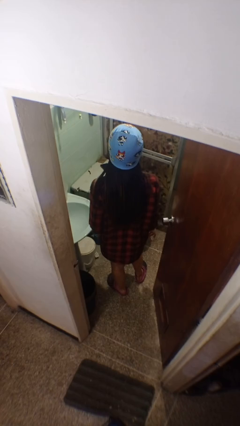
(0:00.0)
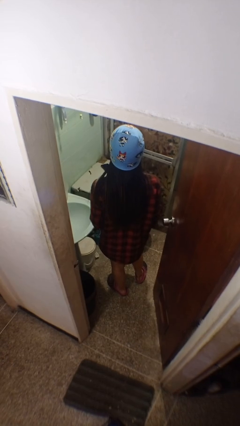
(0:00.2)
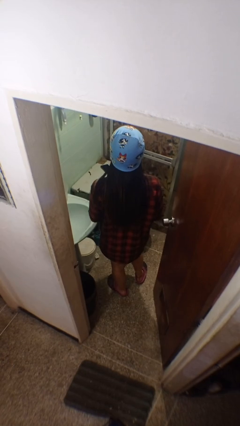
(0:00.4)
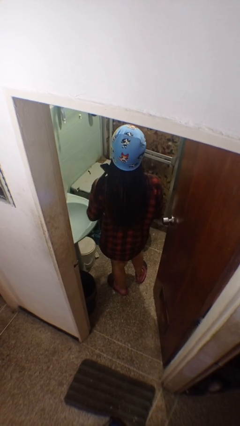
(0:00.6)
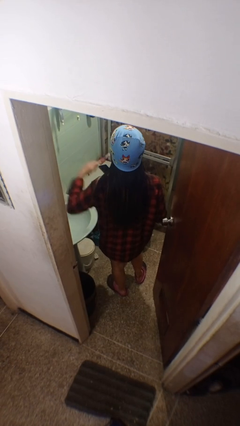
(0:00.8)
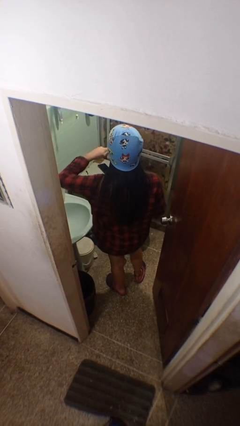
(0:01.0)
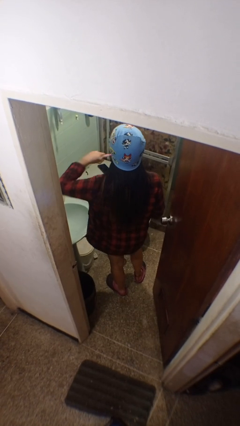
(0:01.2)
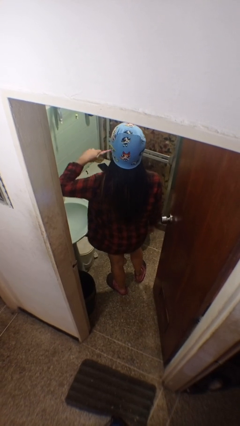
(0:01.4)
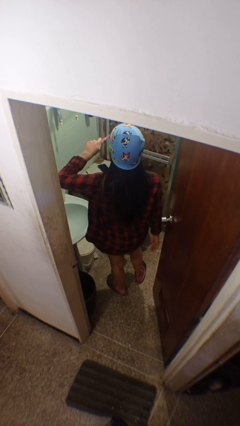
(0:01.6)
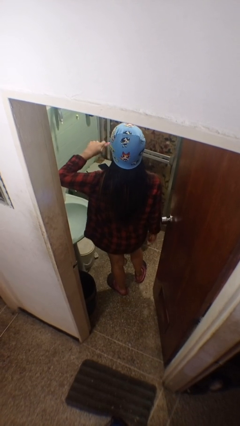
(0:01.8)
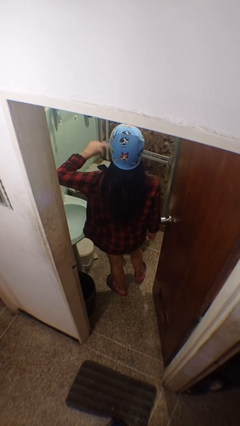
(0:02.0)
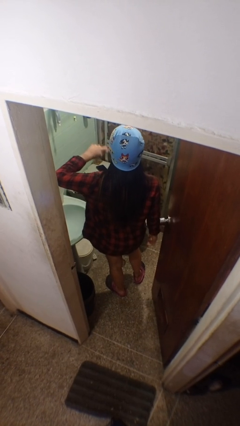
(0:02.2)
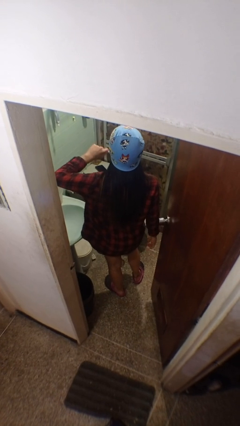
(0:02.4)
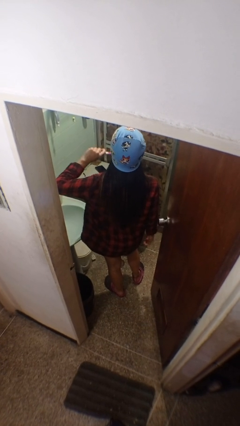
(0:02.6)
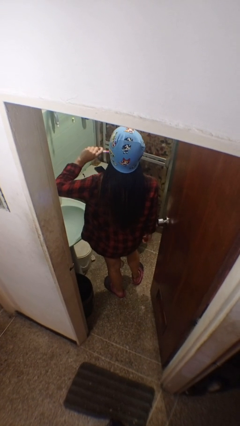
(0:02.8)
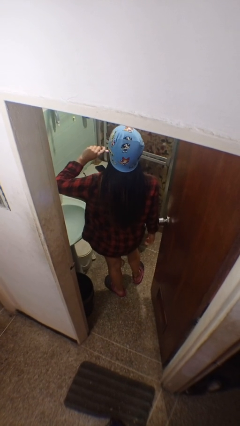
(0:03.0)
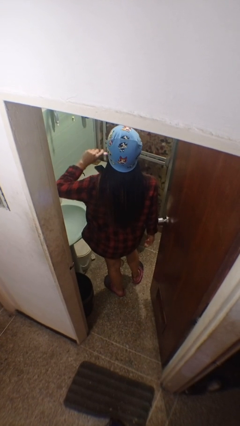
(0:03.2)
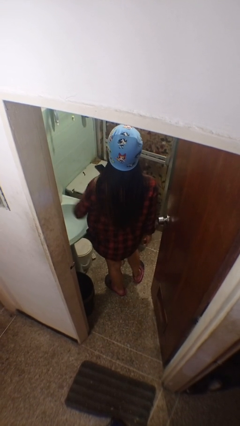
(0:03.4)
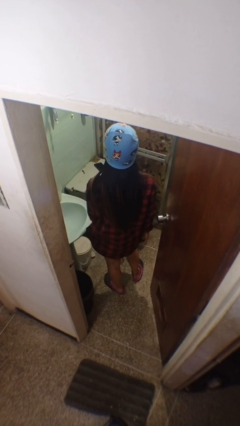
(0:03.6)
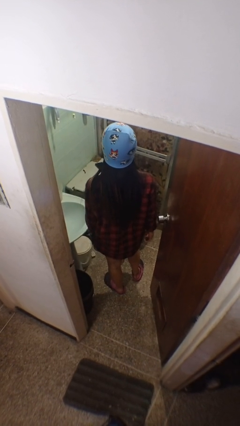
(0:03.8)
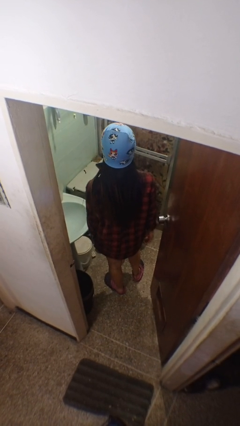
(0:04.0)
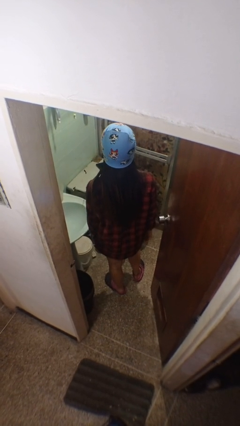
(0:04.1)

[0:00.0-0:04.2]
person brushes teeth

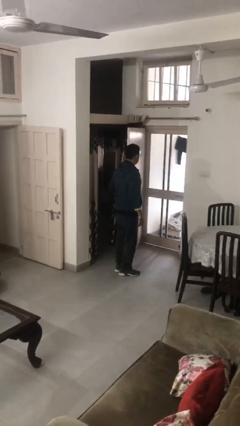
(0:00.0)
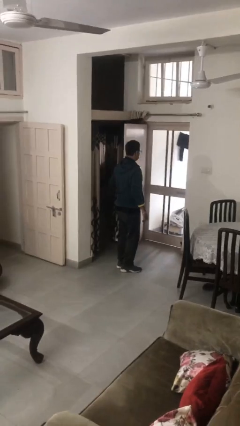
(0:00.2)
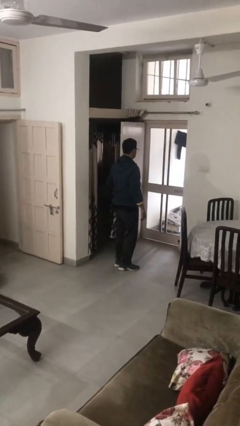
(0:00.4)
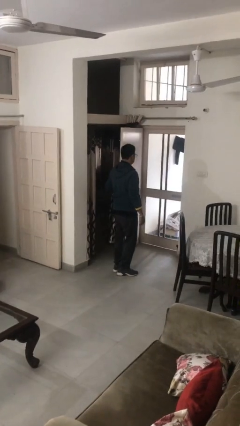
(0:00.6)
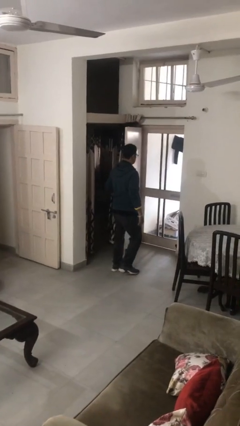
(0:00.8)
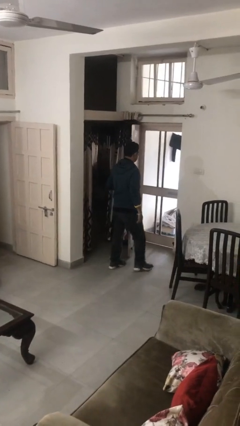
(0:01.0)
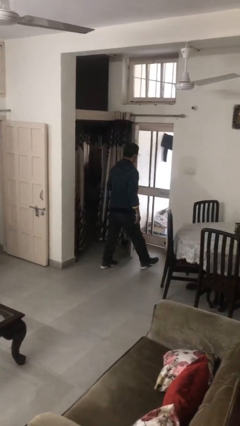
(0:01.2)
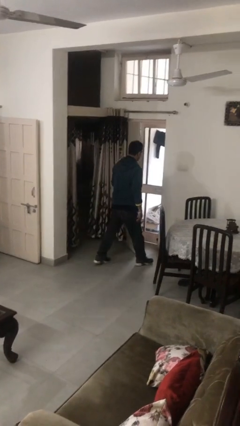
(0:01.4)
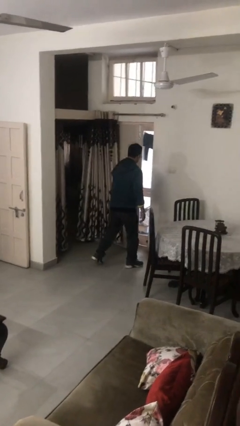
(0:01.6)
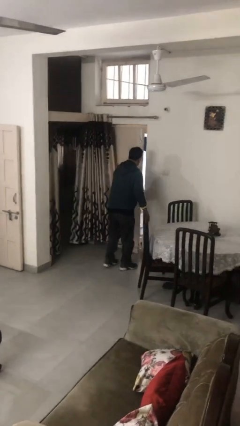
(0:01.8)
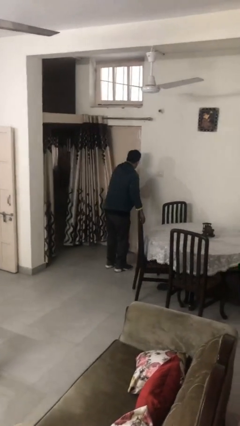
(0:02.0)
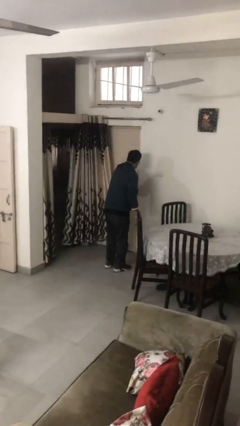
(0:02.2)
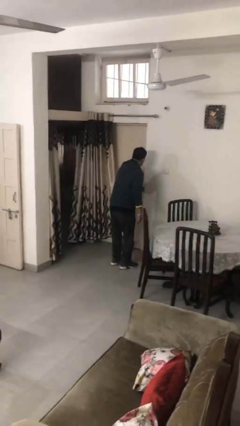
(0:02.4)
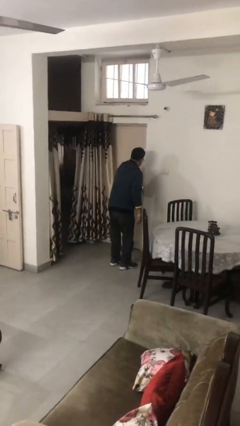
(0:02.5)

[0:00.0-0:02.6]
person closes facility door

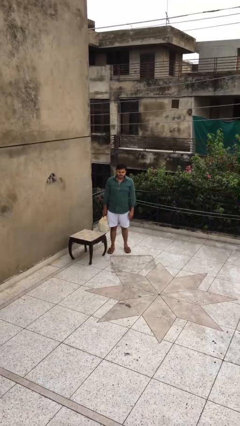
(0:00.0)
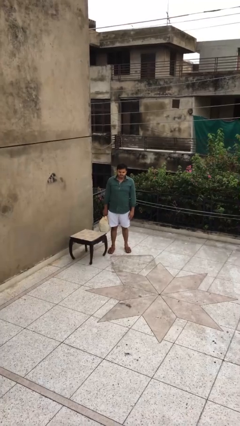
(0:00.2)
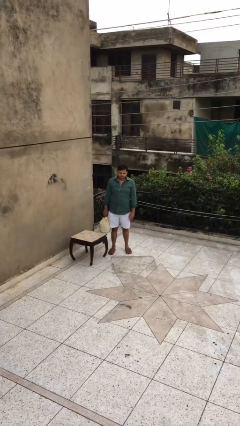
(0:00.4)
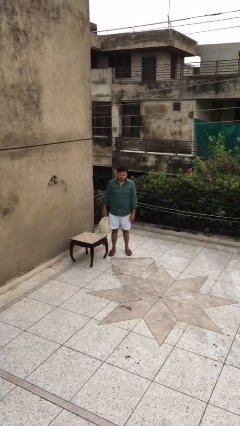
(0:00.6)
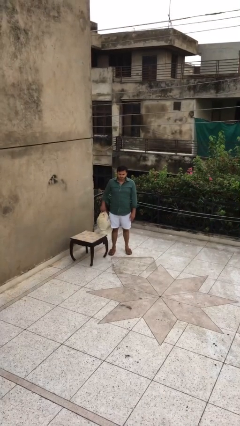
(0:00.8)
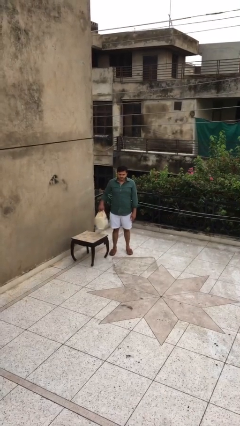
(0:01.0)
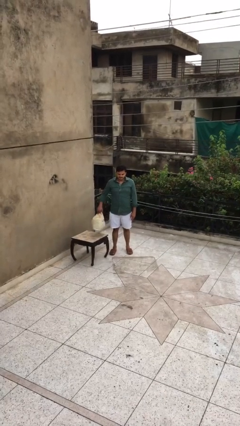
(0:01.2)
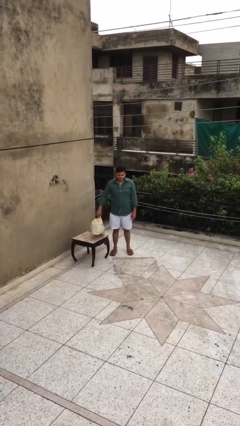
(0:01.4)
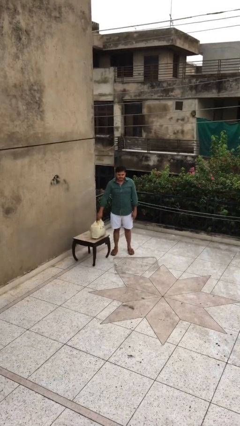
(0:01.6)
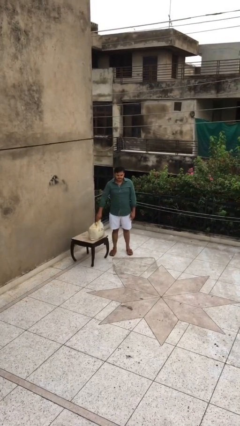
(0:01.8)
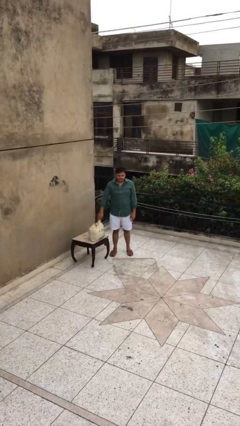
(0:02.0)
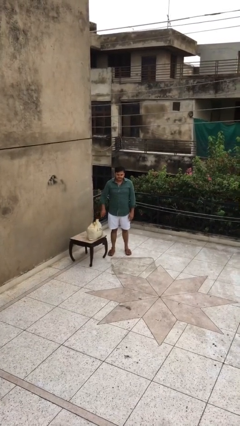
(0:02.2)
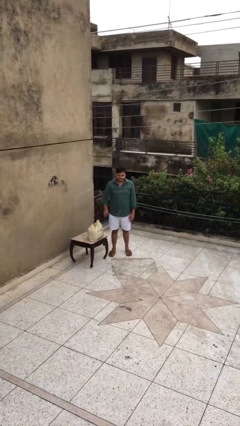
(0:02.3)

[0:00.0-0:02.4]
person puts down object on table

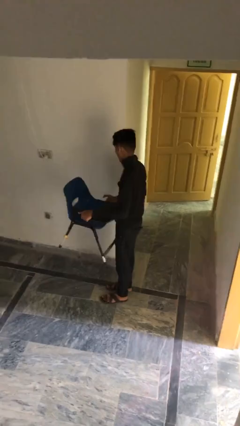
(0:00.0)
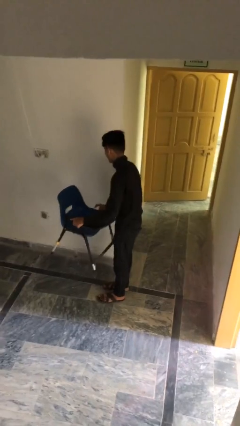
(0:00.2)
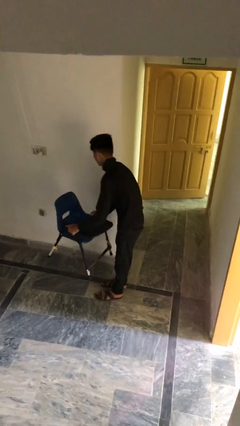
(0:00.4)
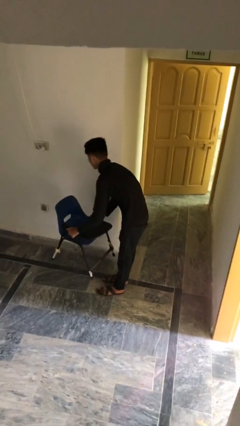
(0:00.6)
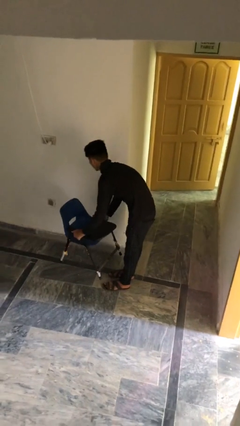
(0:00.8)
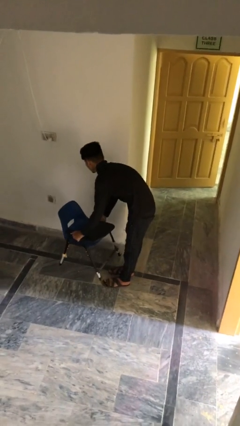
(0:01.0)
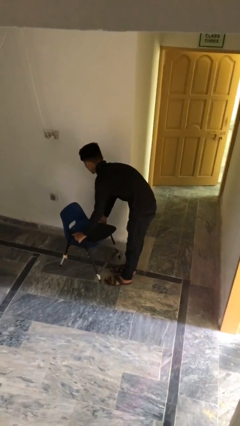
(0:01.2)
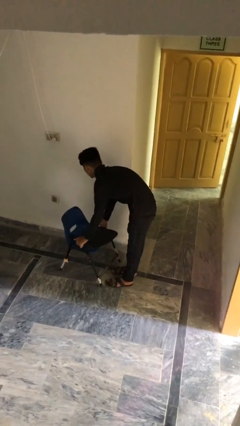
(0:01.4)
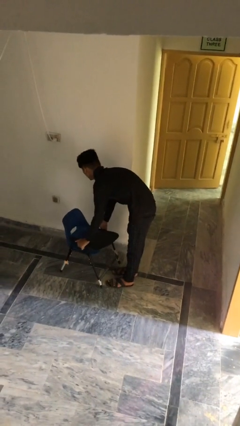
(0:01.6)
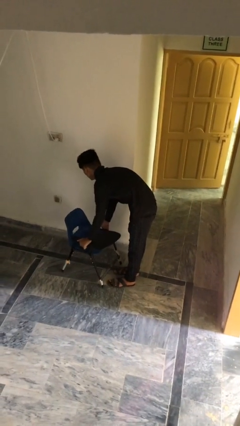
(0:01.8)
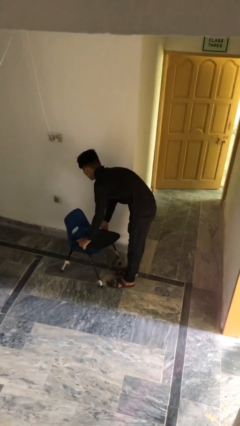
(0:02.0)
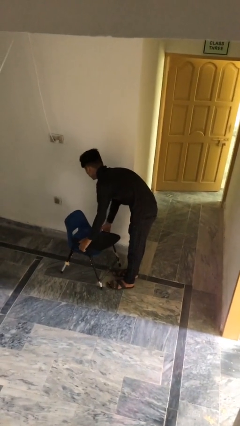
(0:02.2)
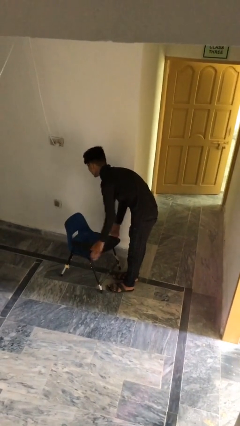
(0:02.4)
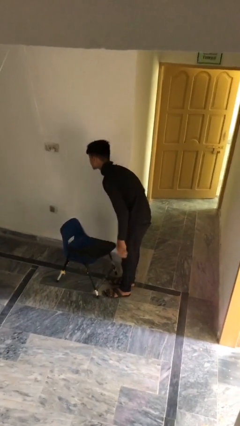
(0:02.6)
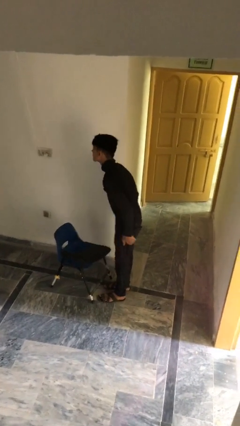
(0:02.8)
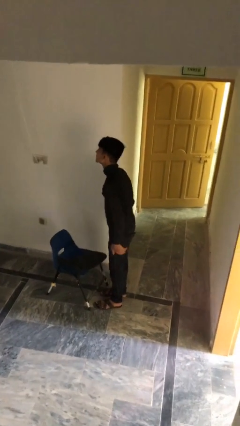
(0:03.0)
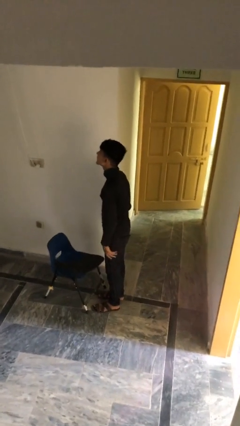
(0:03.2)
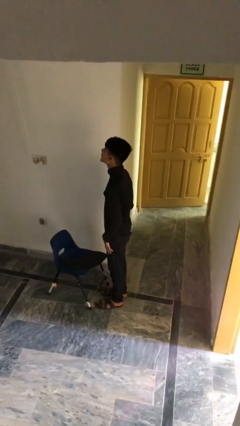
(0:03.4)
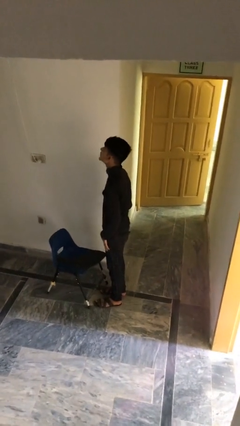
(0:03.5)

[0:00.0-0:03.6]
person puts down object on floor

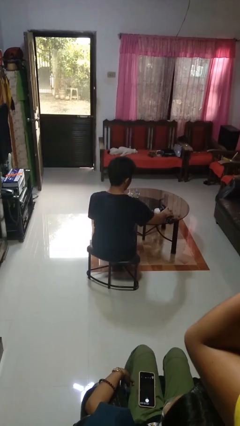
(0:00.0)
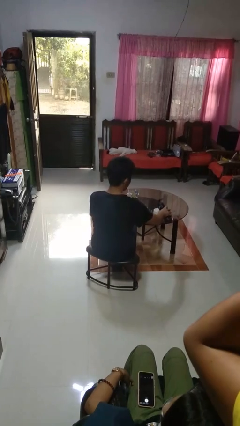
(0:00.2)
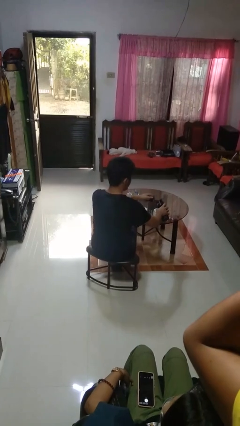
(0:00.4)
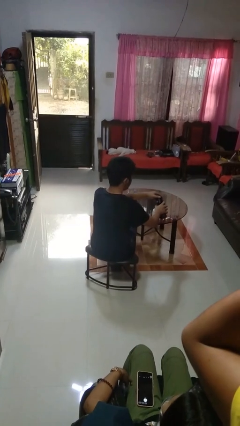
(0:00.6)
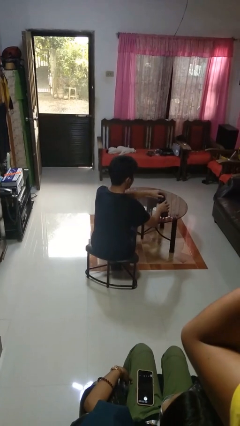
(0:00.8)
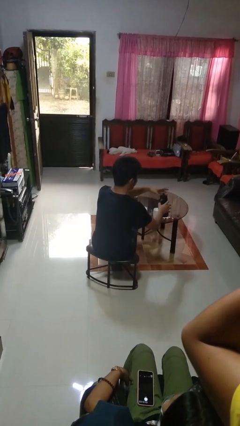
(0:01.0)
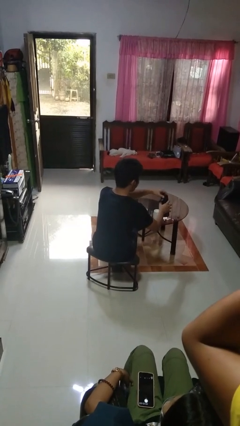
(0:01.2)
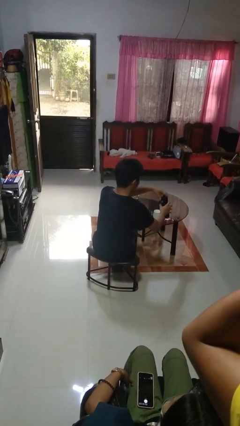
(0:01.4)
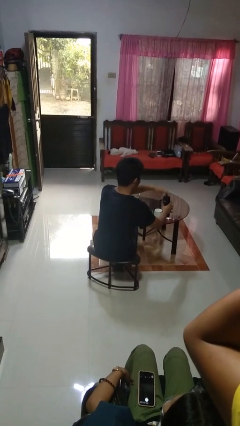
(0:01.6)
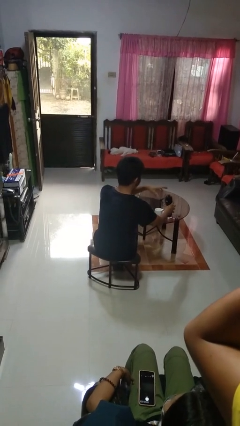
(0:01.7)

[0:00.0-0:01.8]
person screws lid to bottle

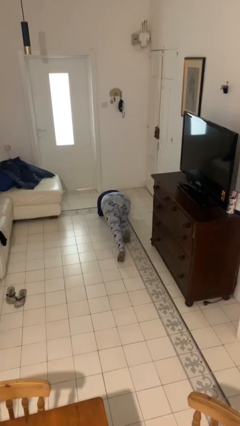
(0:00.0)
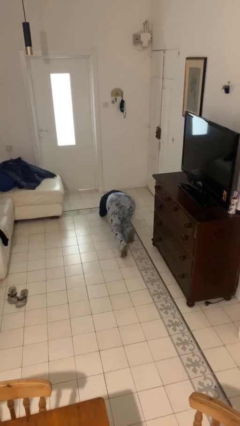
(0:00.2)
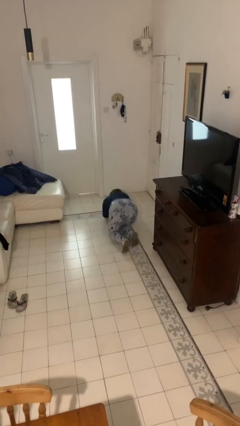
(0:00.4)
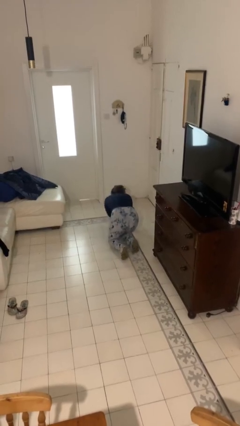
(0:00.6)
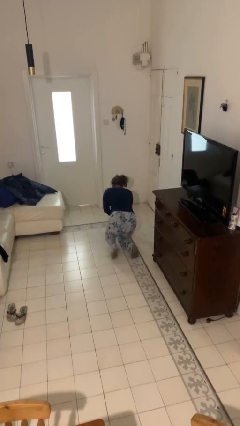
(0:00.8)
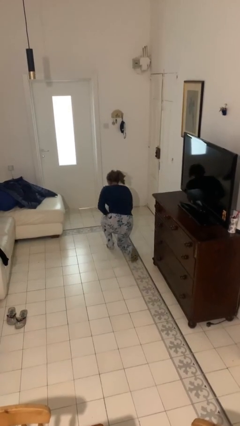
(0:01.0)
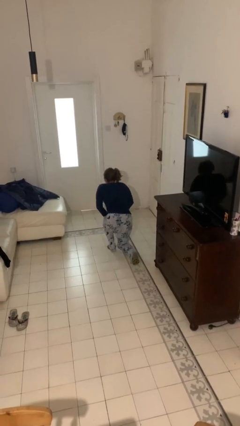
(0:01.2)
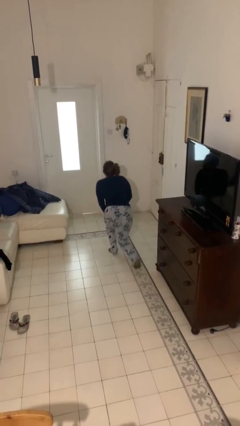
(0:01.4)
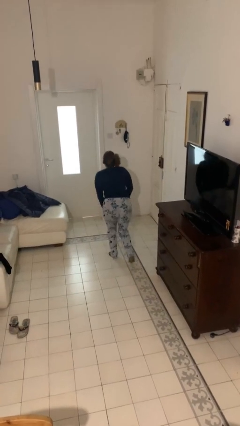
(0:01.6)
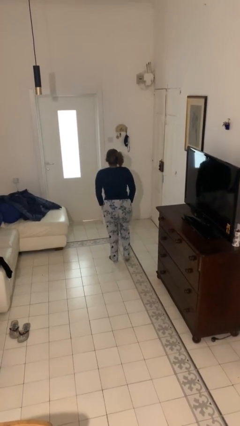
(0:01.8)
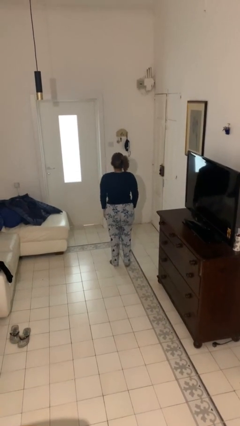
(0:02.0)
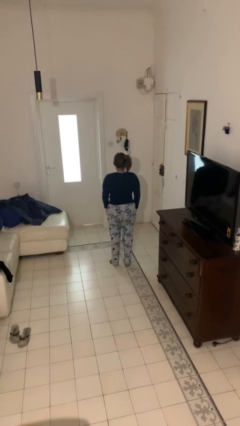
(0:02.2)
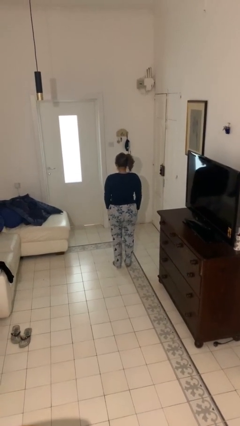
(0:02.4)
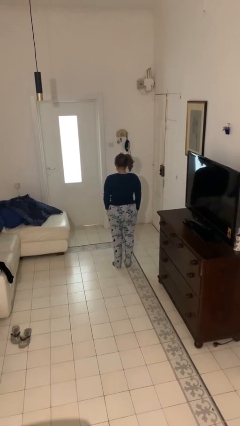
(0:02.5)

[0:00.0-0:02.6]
person stands up from floor
